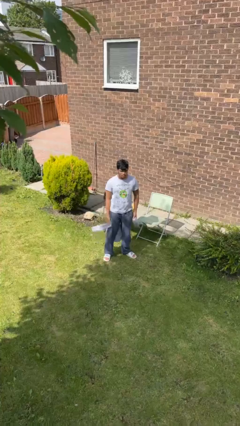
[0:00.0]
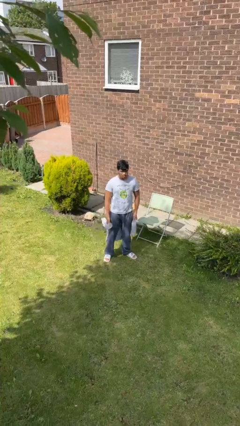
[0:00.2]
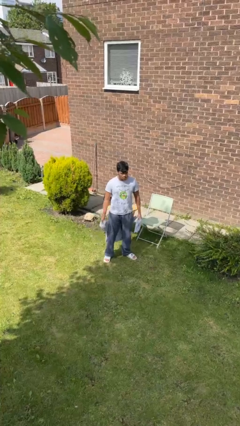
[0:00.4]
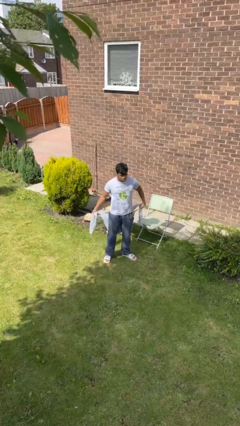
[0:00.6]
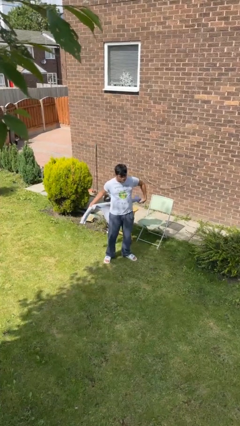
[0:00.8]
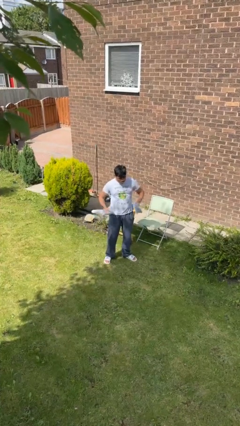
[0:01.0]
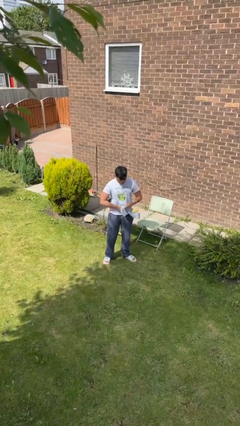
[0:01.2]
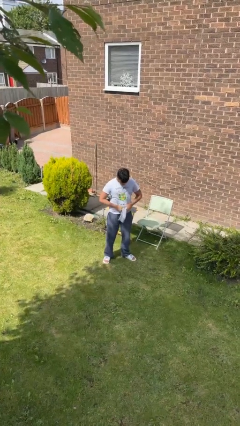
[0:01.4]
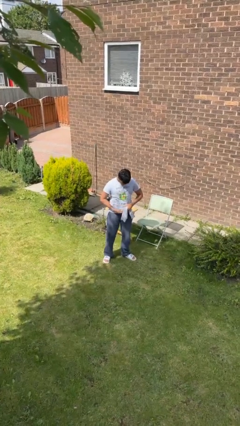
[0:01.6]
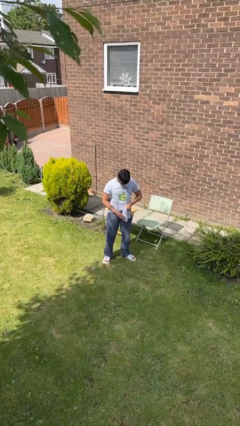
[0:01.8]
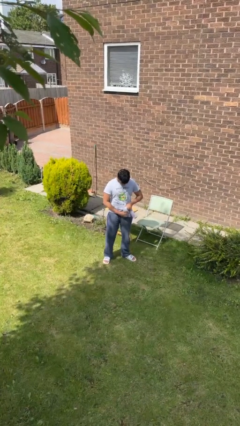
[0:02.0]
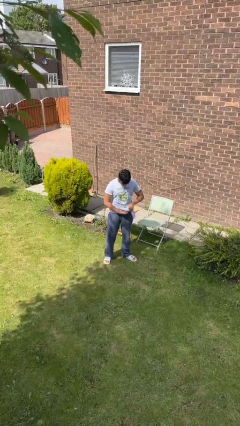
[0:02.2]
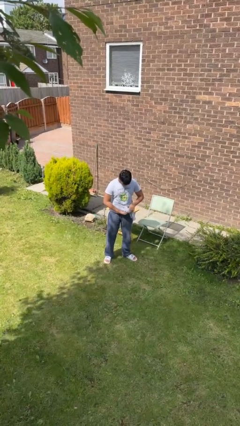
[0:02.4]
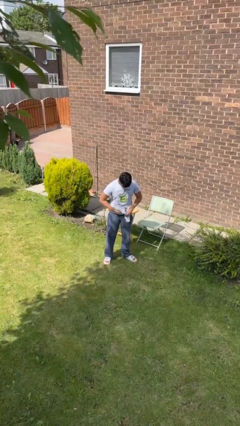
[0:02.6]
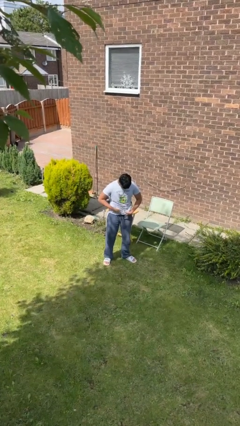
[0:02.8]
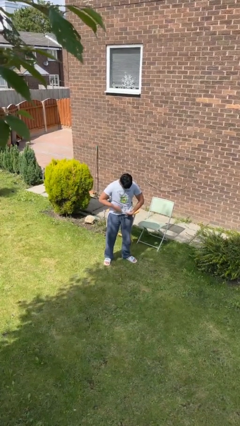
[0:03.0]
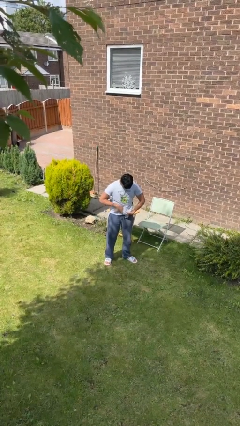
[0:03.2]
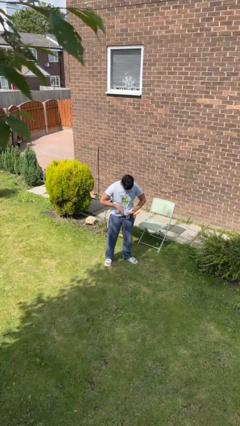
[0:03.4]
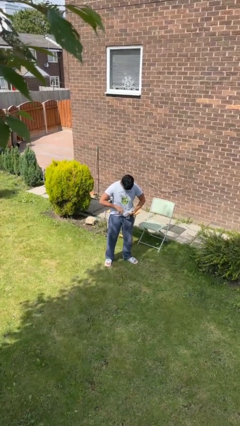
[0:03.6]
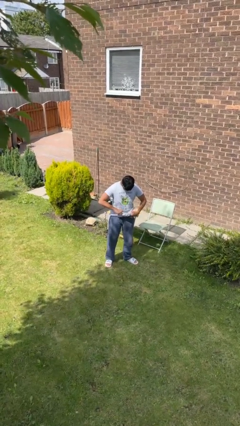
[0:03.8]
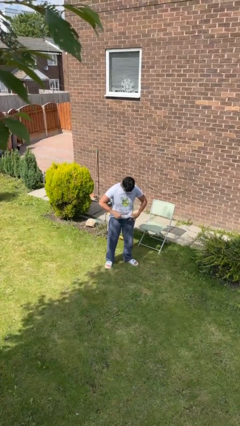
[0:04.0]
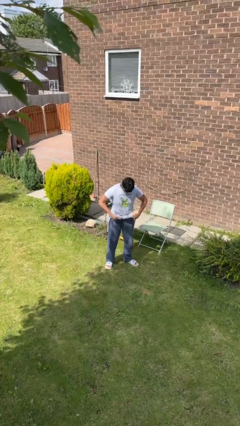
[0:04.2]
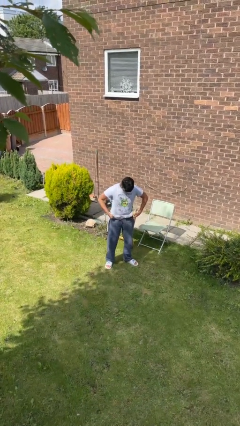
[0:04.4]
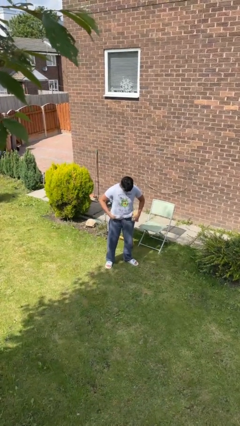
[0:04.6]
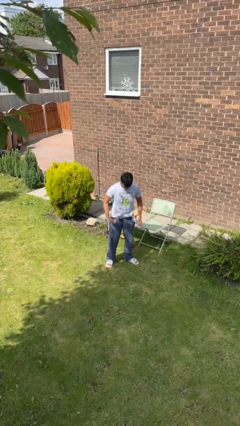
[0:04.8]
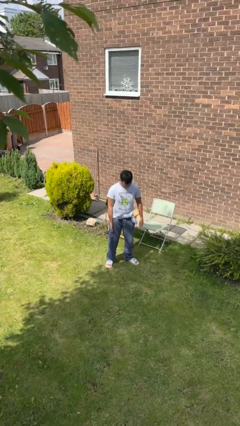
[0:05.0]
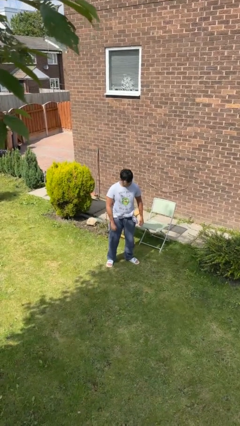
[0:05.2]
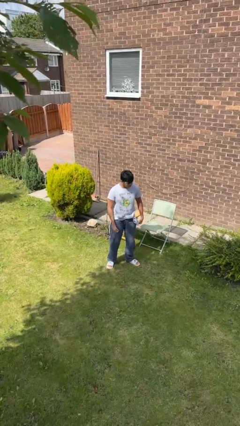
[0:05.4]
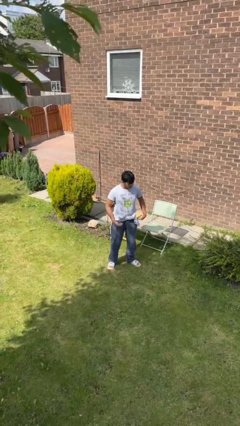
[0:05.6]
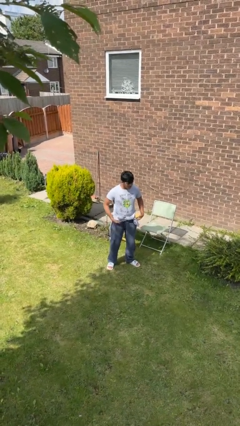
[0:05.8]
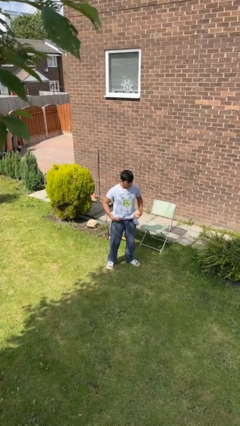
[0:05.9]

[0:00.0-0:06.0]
person ties jacket around waist

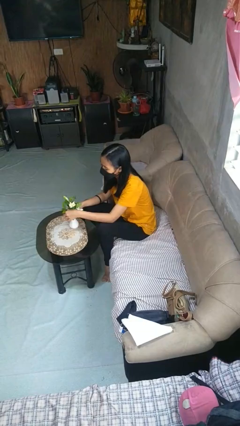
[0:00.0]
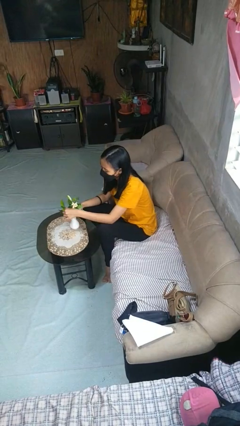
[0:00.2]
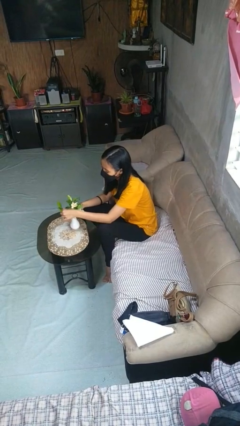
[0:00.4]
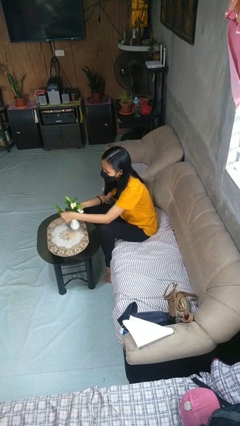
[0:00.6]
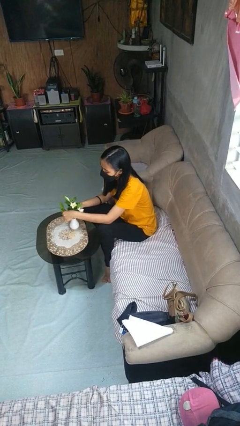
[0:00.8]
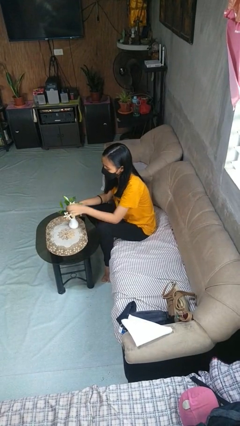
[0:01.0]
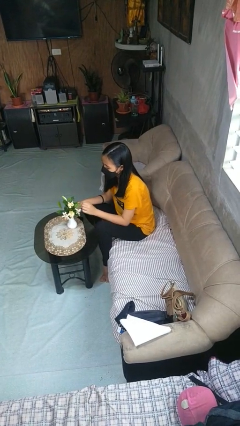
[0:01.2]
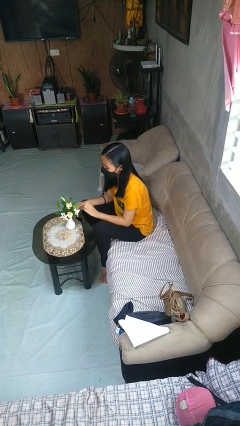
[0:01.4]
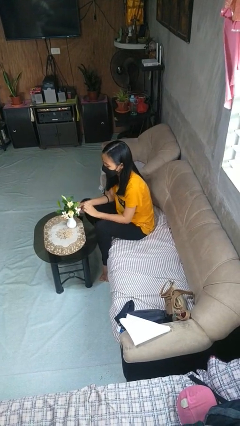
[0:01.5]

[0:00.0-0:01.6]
person arranges flowers in vase

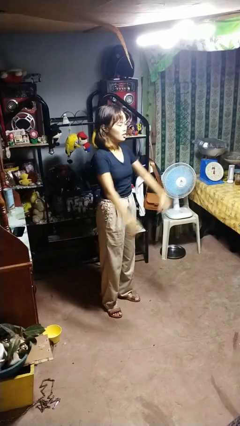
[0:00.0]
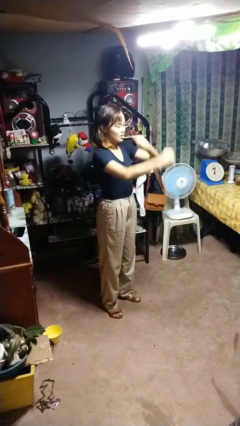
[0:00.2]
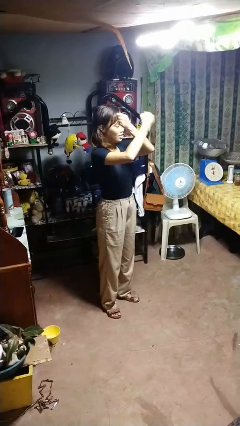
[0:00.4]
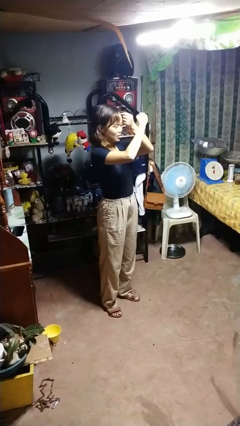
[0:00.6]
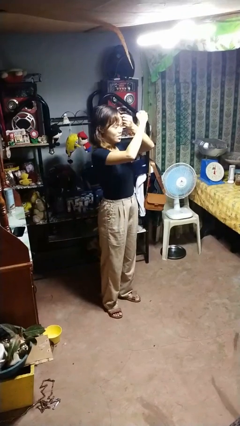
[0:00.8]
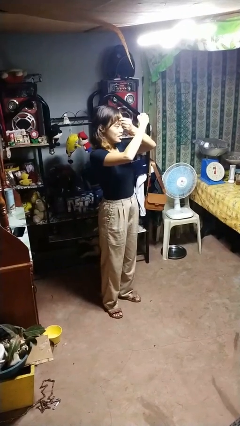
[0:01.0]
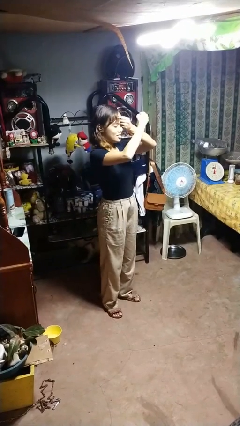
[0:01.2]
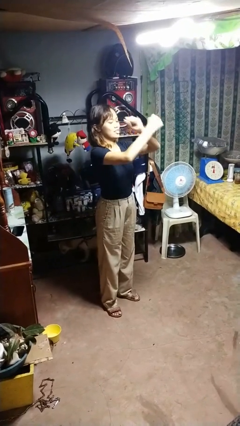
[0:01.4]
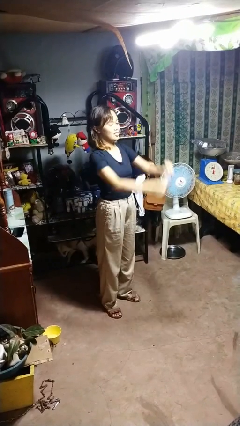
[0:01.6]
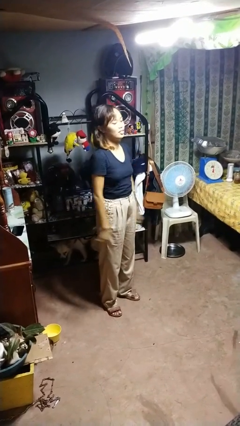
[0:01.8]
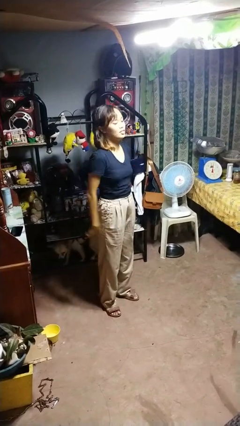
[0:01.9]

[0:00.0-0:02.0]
person gestures arms x

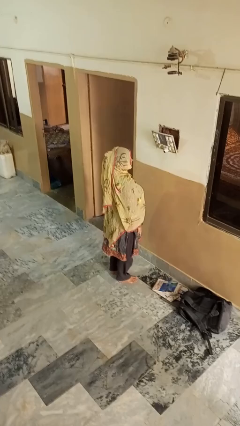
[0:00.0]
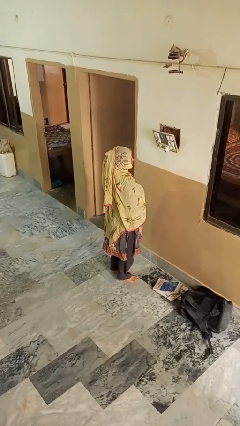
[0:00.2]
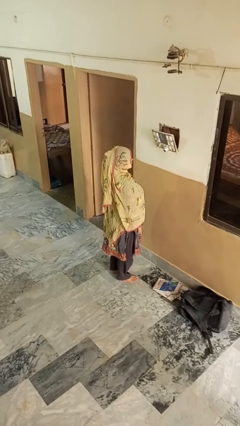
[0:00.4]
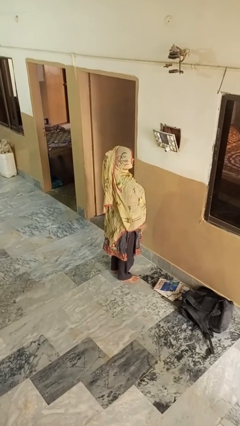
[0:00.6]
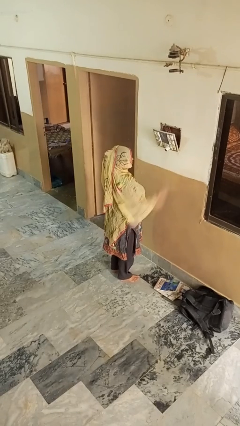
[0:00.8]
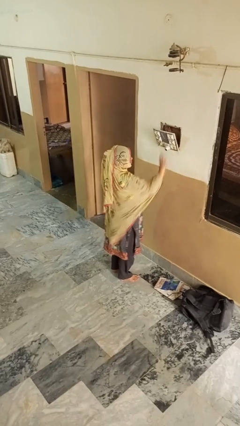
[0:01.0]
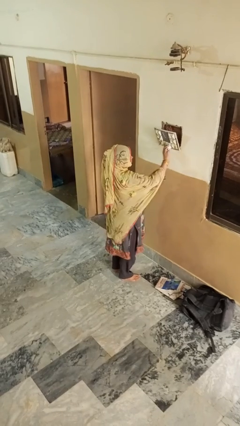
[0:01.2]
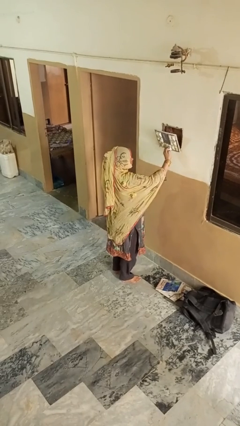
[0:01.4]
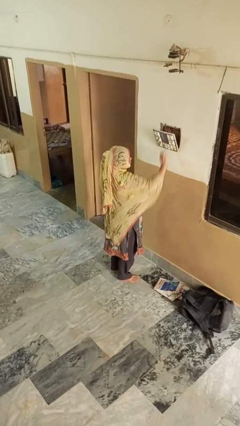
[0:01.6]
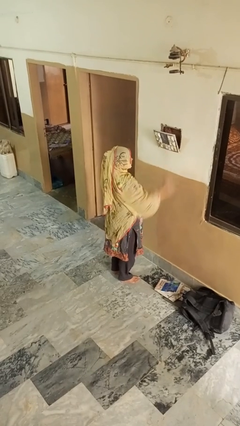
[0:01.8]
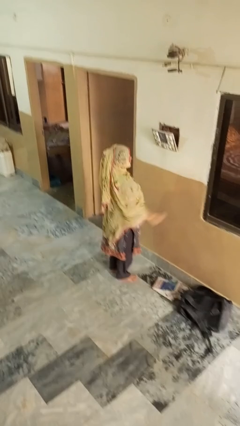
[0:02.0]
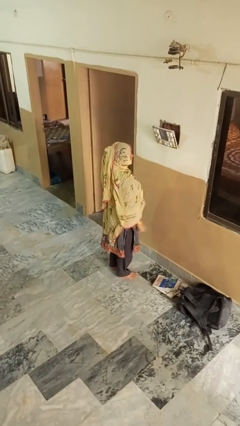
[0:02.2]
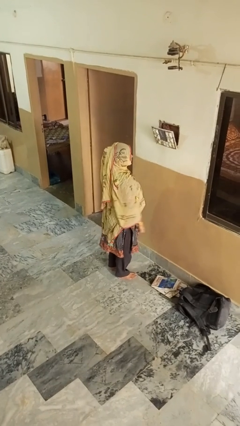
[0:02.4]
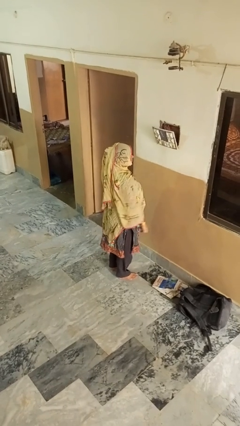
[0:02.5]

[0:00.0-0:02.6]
person unplugs from electrical socket

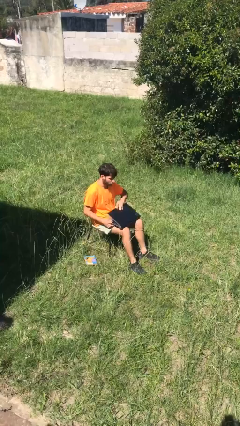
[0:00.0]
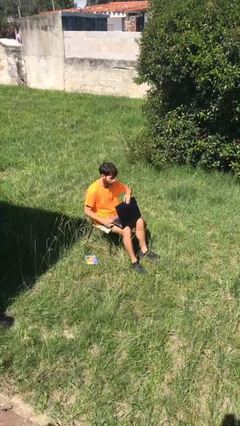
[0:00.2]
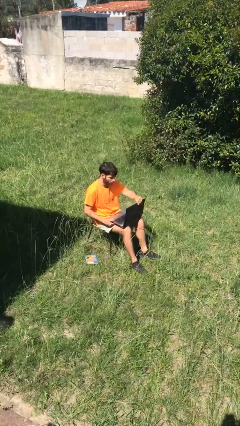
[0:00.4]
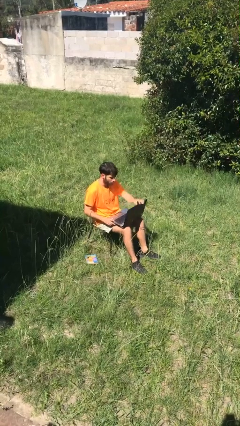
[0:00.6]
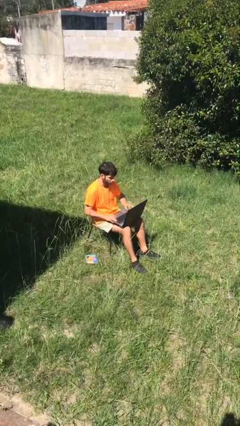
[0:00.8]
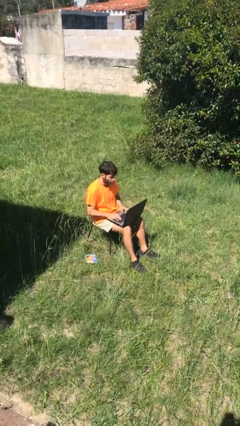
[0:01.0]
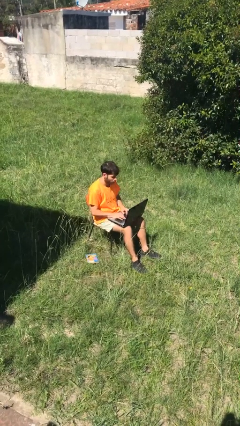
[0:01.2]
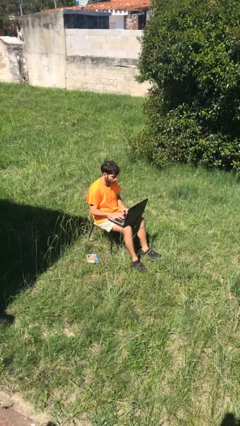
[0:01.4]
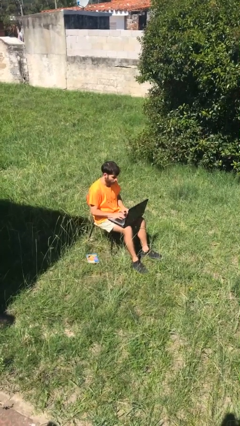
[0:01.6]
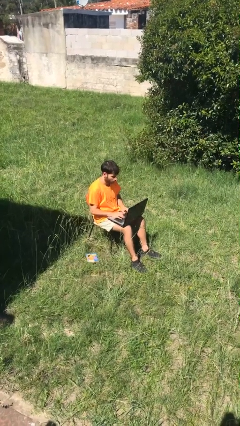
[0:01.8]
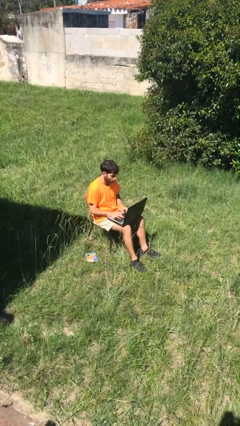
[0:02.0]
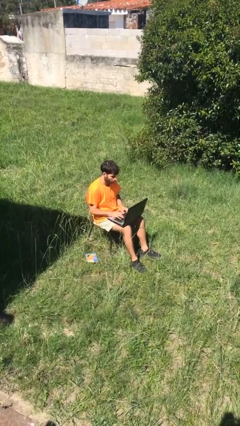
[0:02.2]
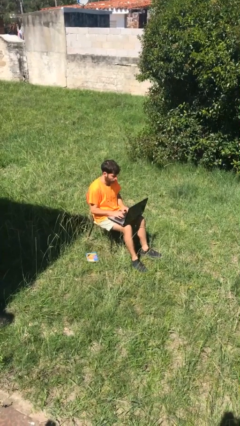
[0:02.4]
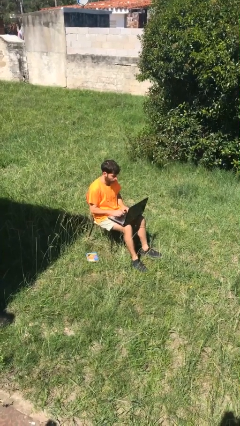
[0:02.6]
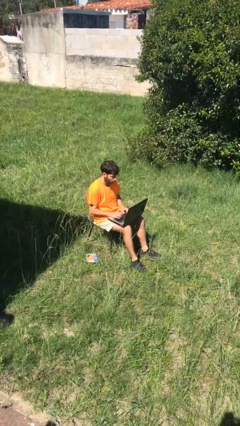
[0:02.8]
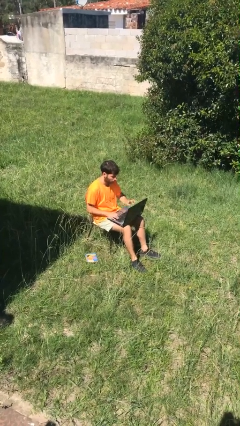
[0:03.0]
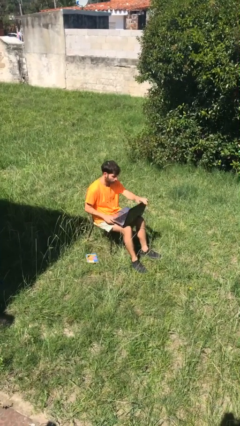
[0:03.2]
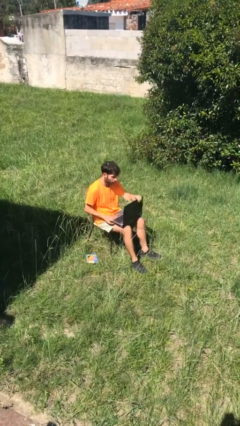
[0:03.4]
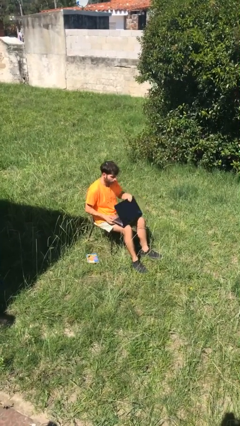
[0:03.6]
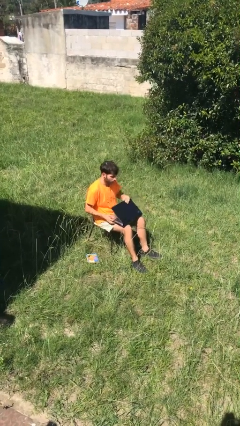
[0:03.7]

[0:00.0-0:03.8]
person interacts with laptop

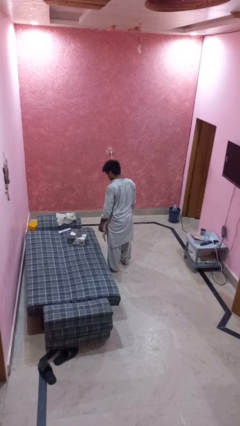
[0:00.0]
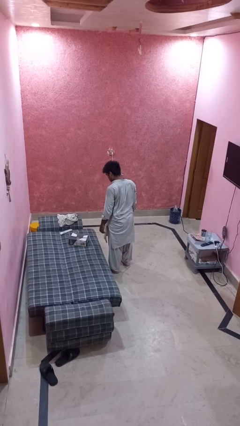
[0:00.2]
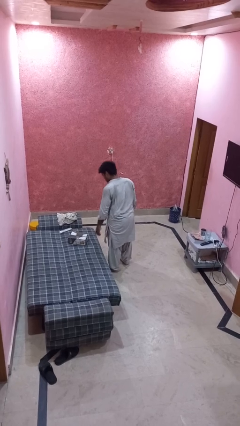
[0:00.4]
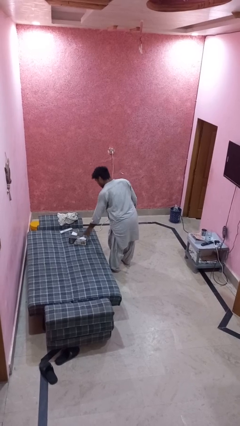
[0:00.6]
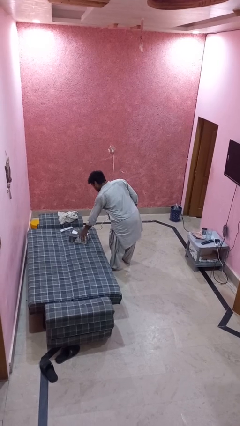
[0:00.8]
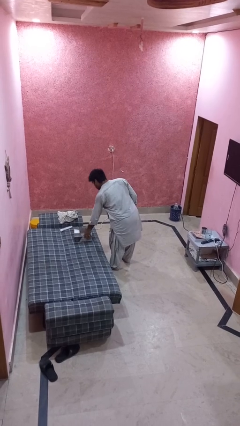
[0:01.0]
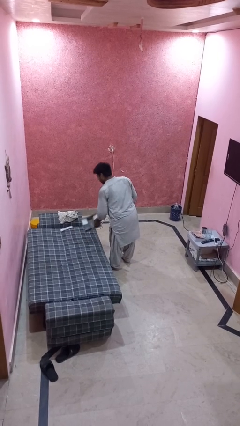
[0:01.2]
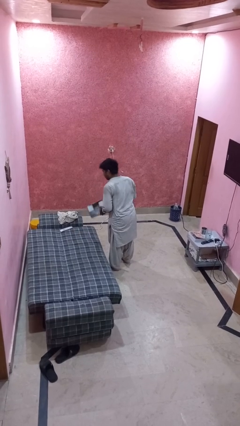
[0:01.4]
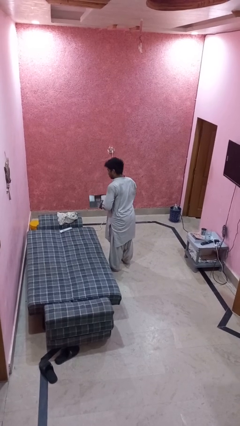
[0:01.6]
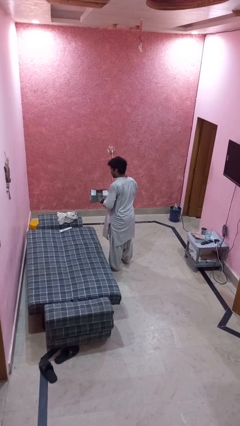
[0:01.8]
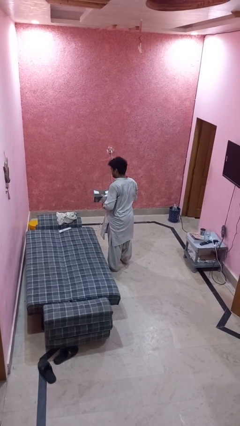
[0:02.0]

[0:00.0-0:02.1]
person picks up object from bed
